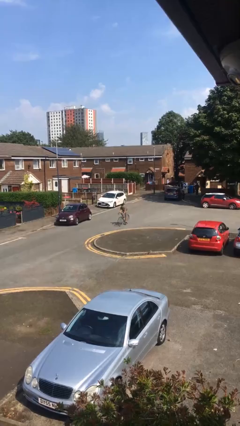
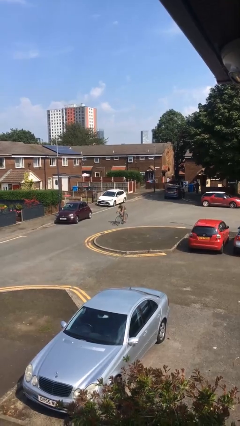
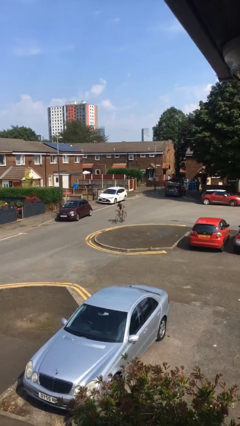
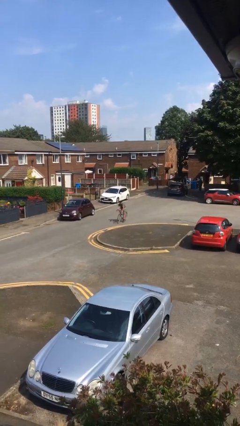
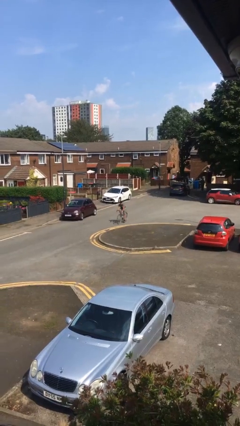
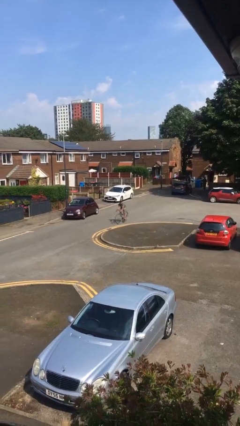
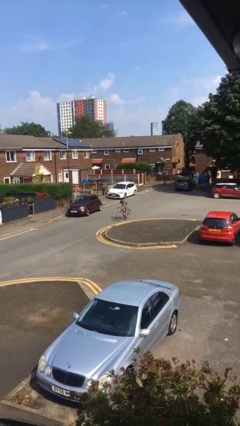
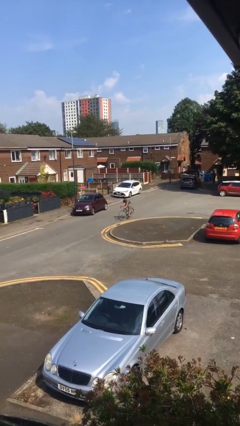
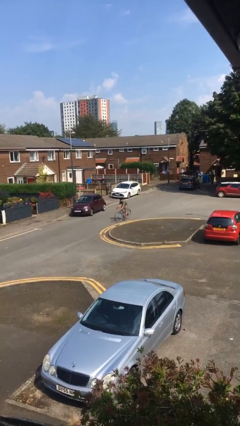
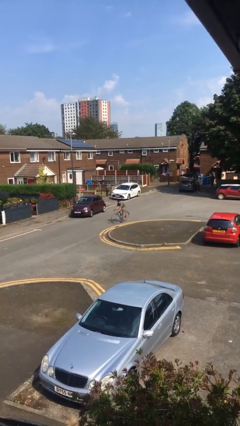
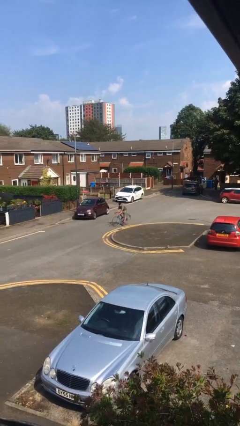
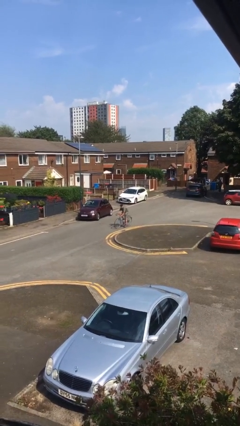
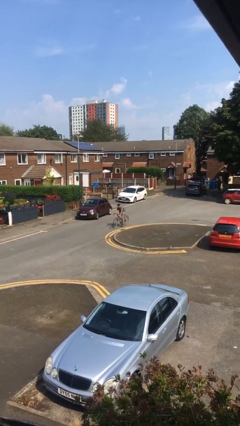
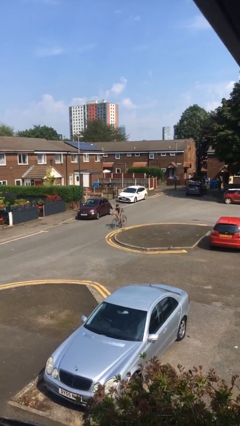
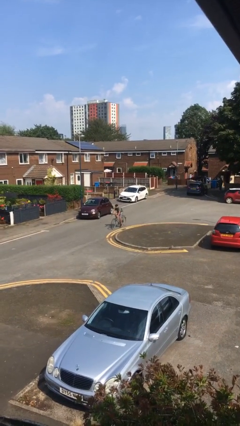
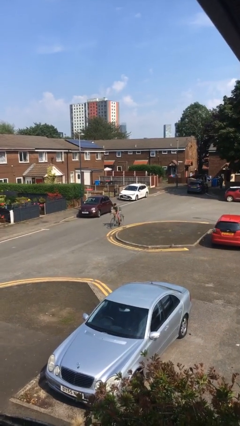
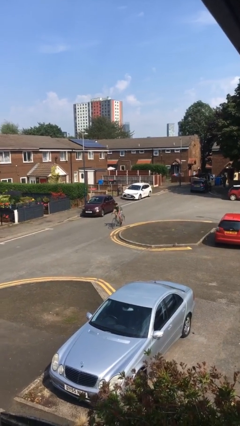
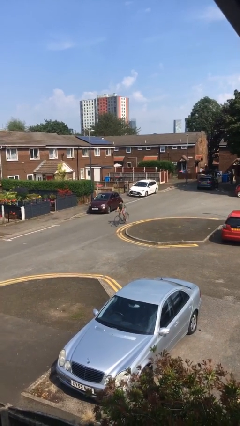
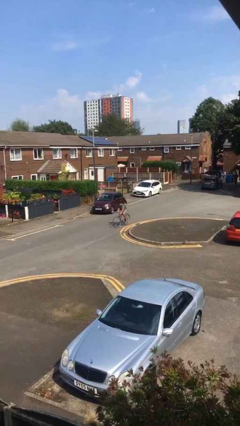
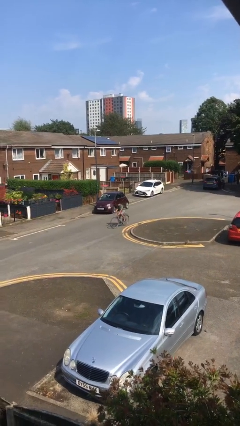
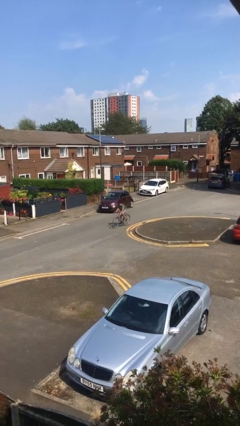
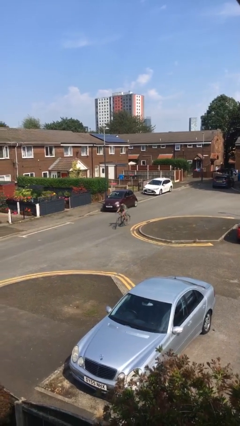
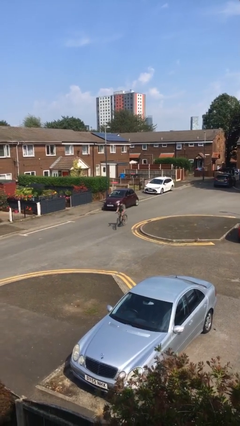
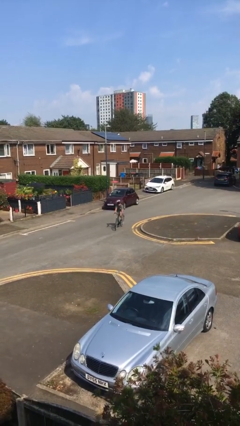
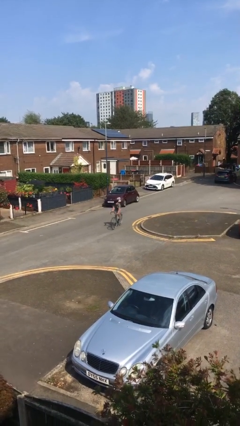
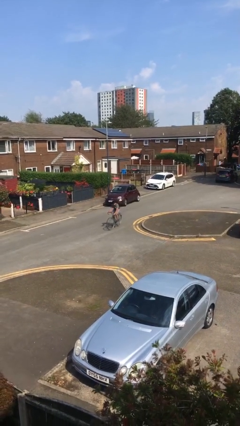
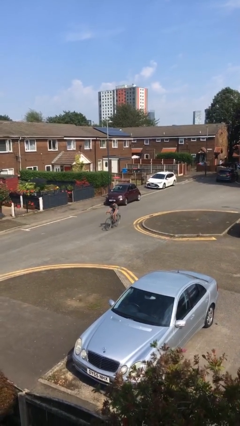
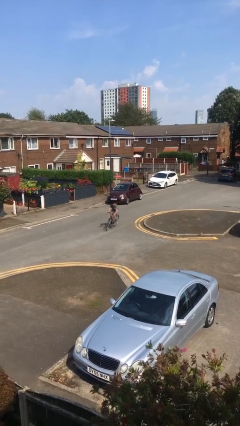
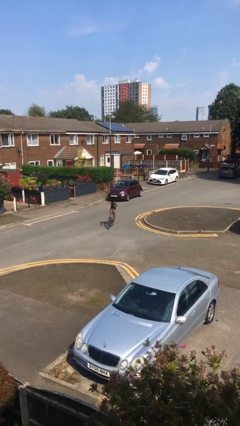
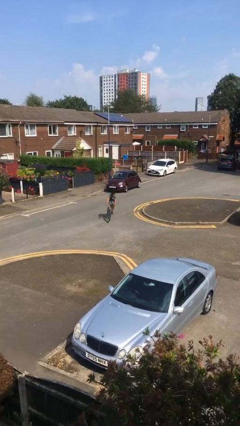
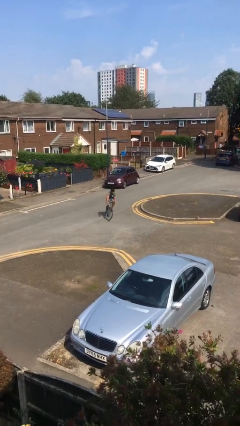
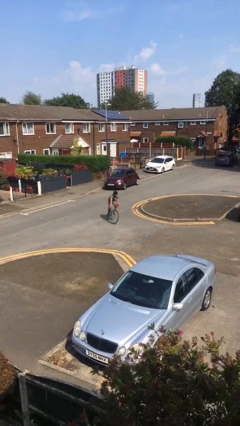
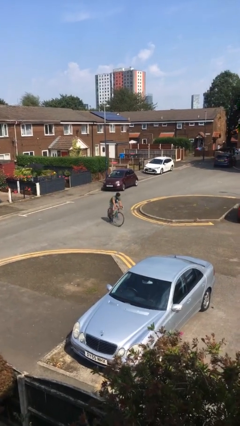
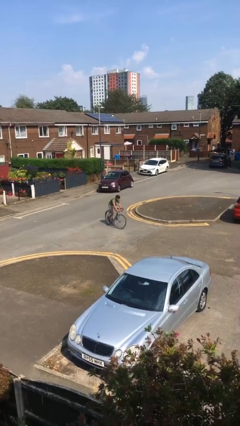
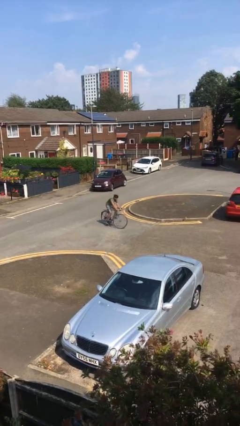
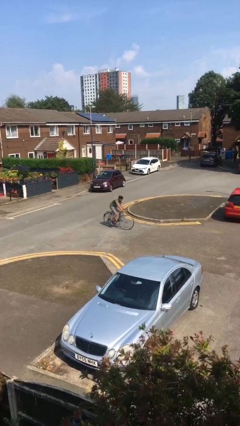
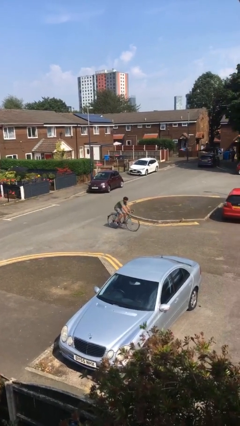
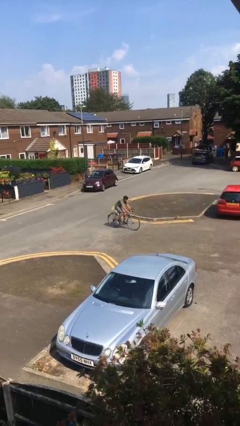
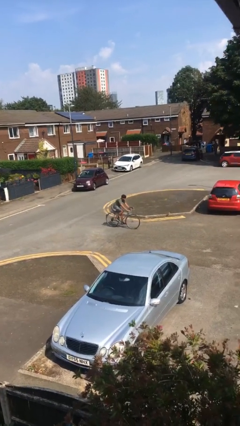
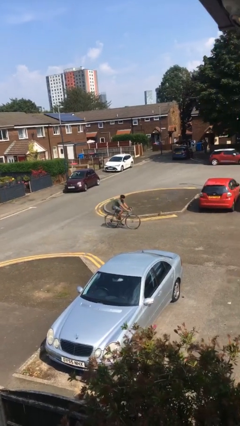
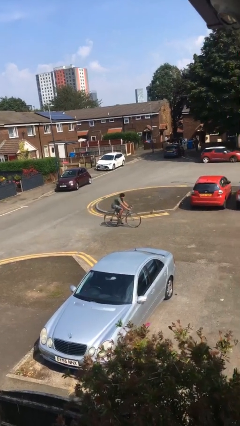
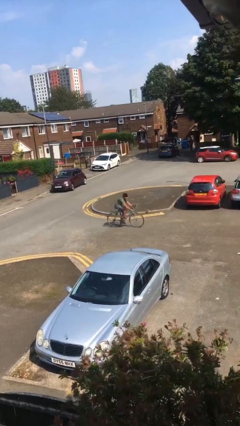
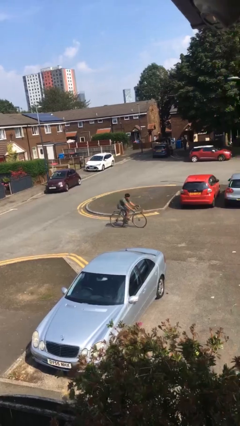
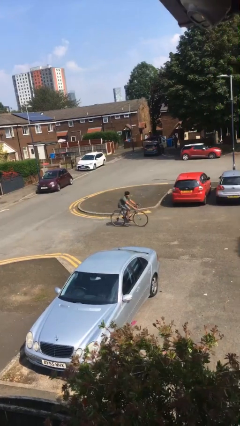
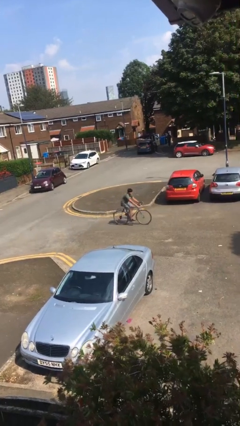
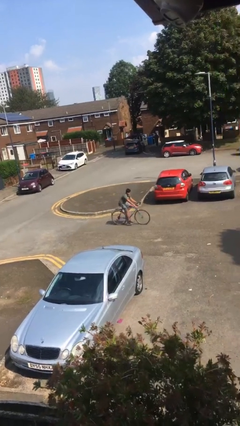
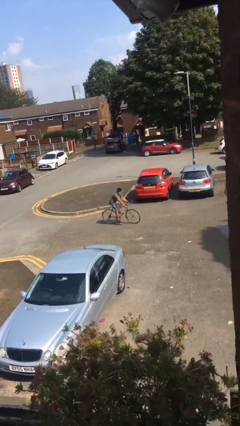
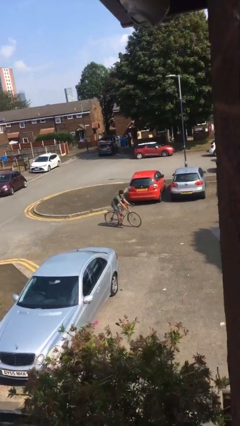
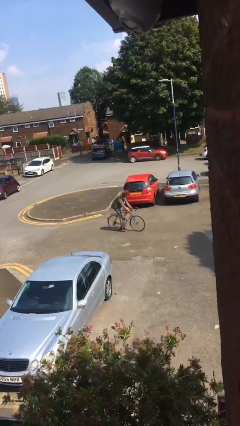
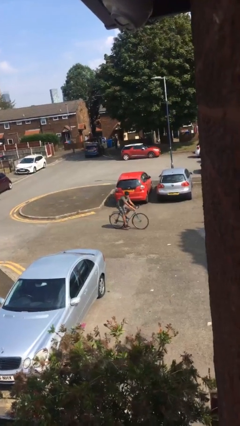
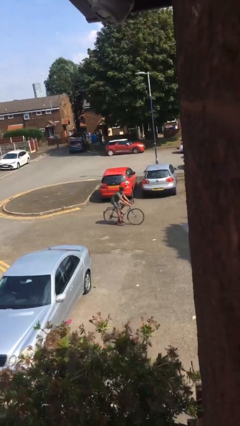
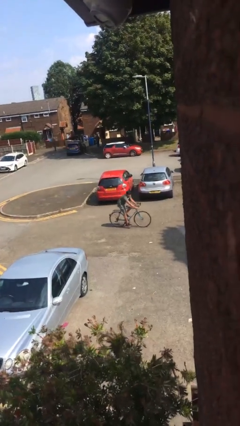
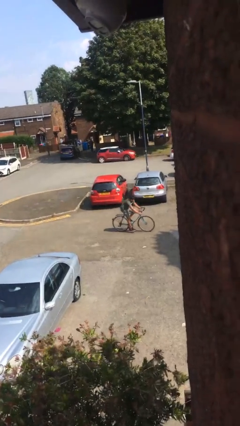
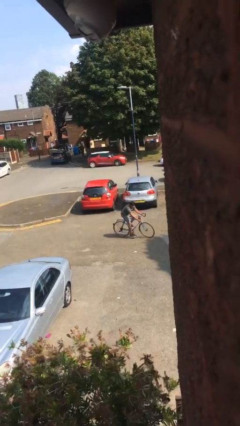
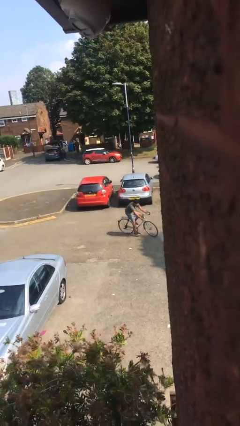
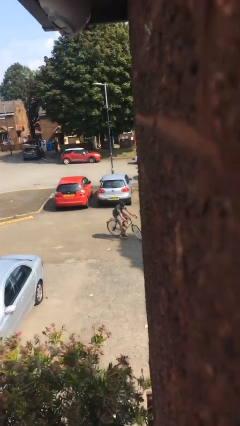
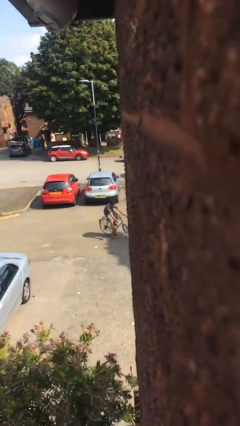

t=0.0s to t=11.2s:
person rides bicycle

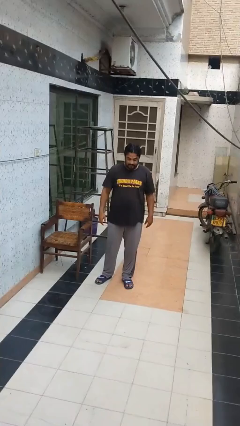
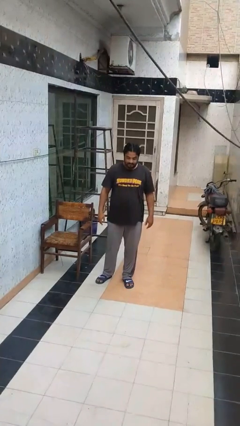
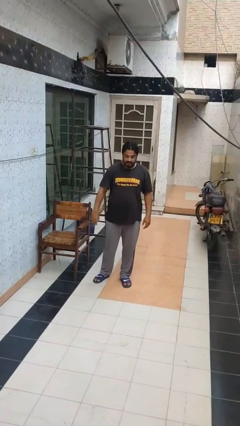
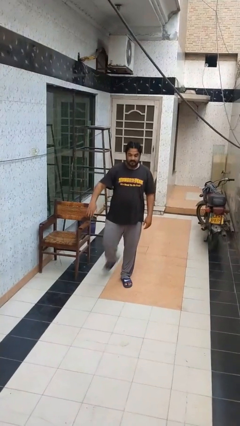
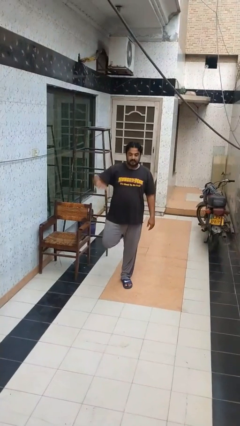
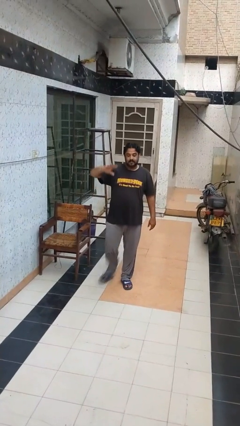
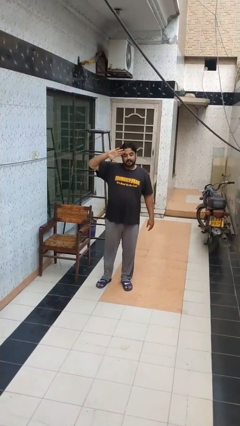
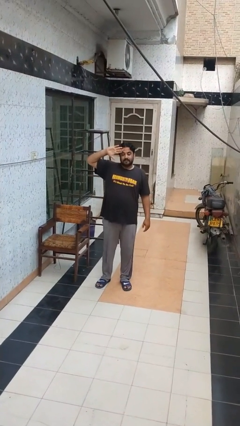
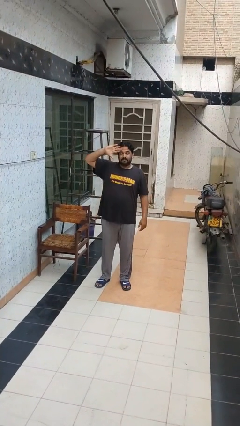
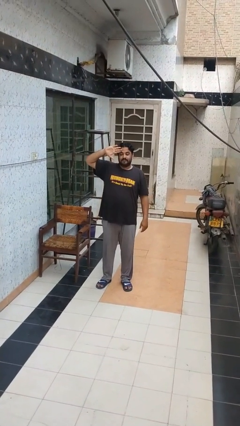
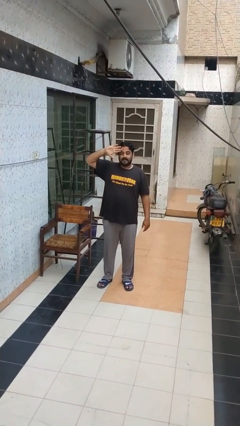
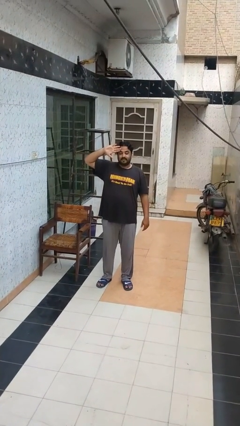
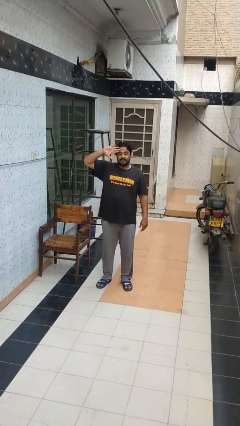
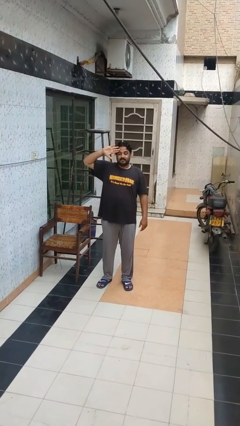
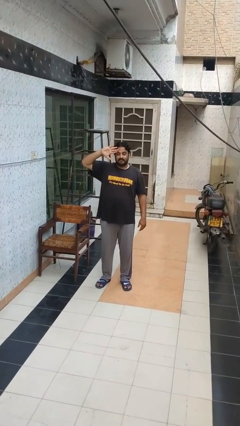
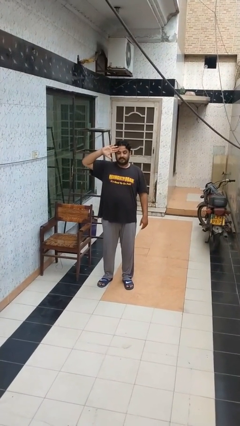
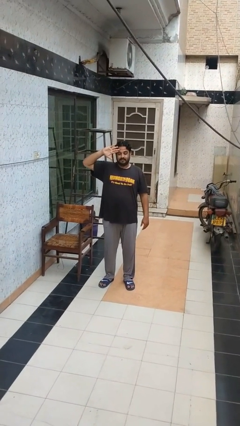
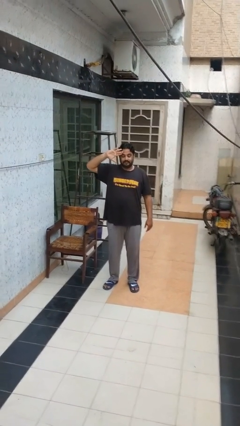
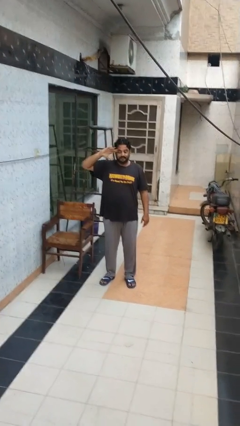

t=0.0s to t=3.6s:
person salutes

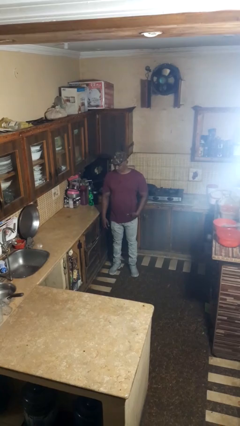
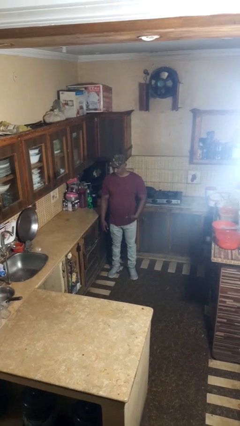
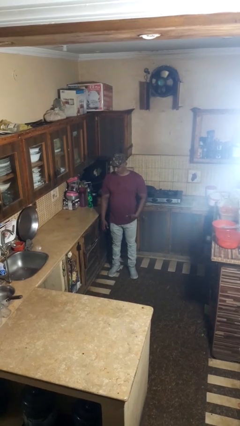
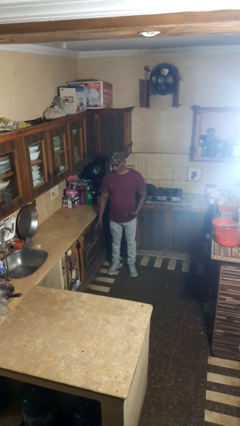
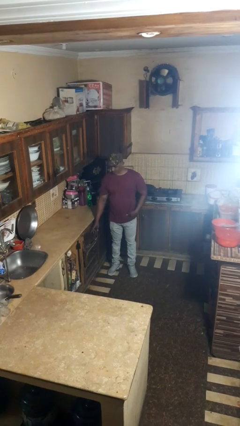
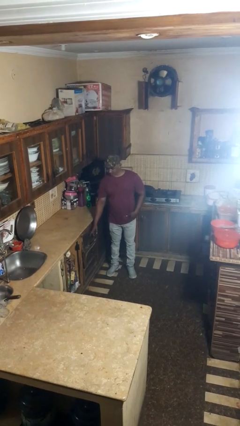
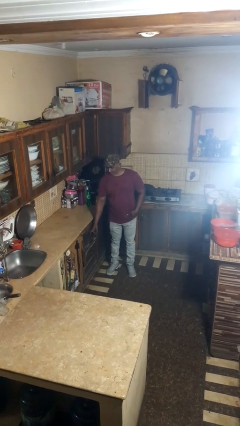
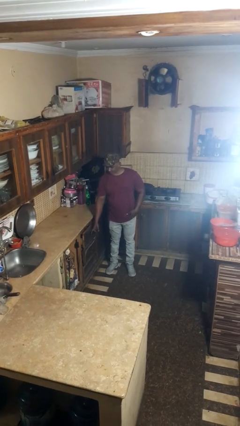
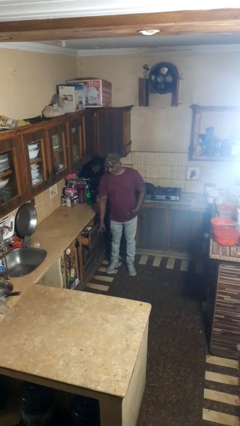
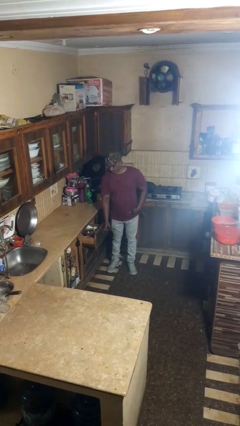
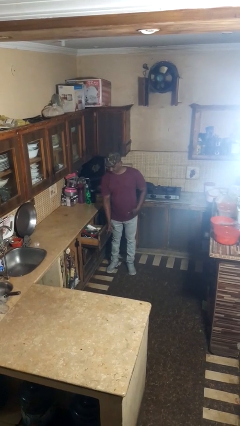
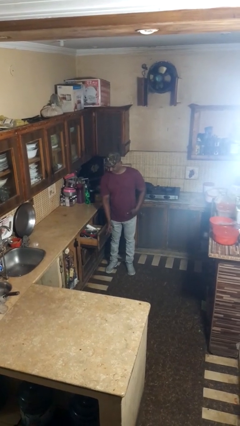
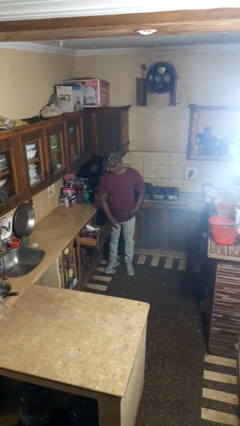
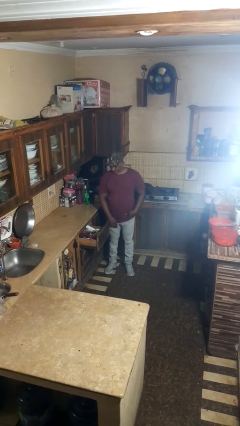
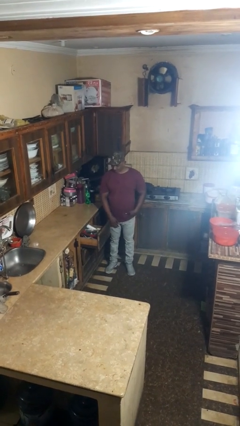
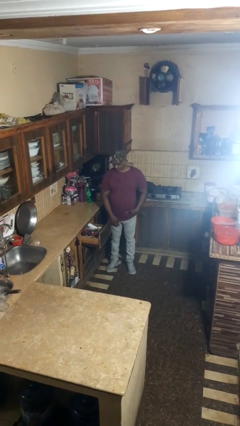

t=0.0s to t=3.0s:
person opens kitchen drawer

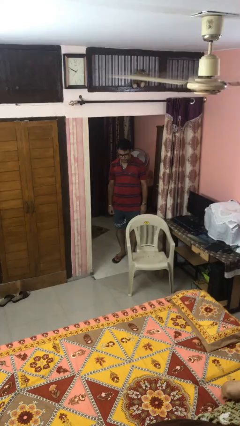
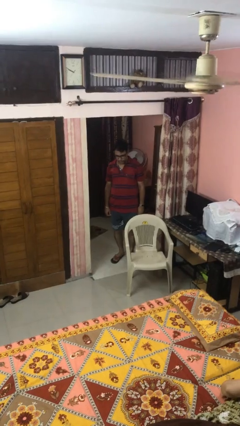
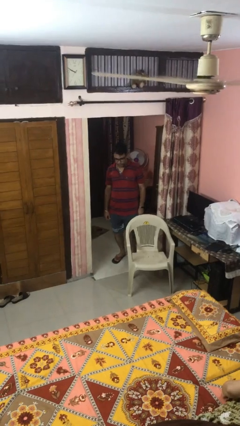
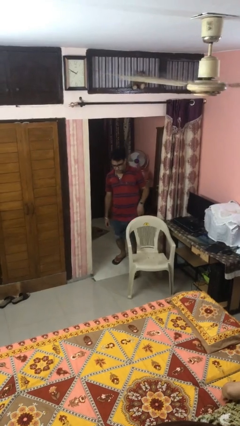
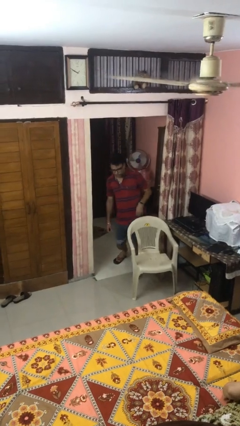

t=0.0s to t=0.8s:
person trips on object on floor
